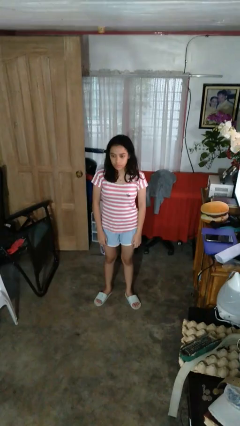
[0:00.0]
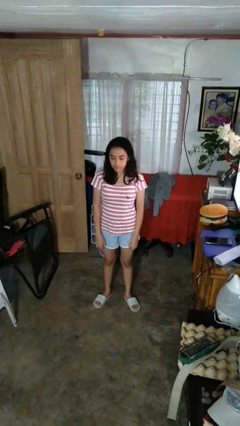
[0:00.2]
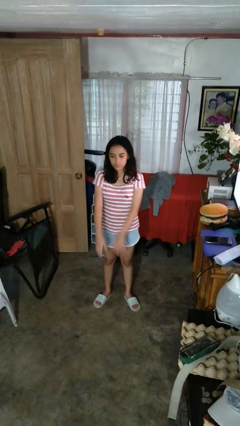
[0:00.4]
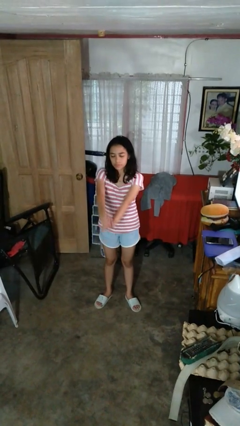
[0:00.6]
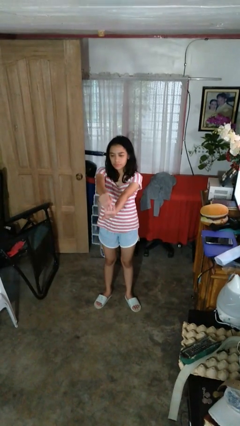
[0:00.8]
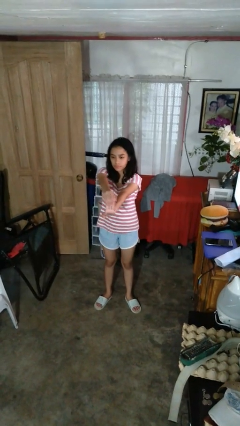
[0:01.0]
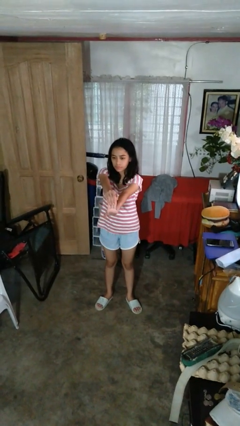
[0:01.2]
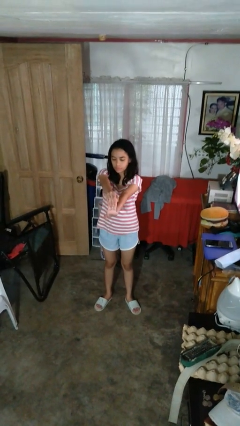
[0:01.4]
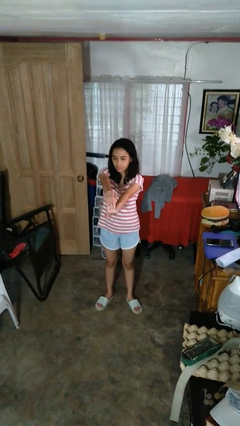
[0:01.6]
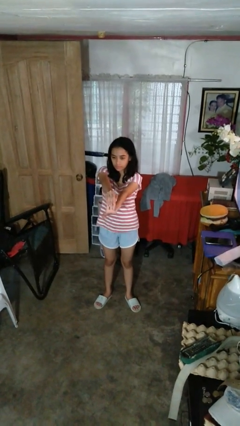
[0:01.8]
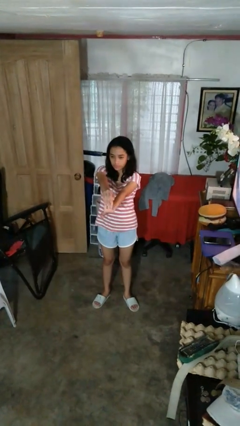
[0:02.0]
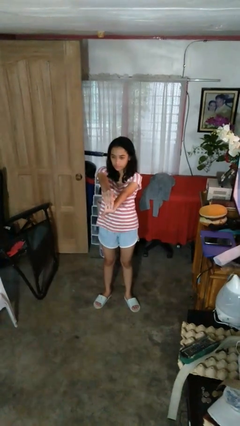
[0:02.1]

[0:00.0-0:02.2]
person cracks knuckles

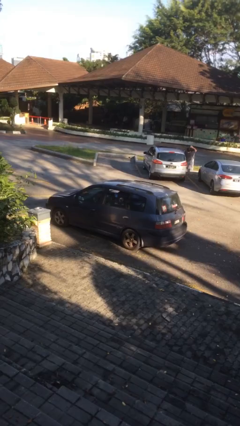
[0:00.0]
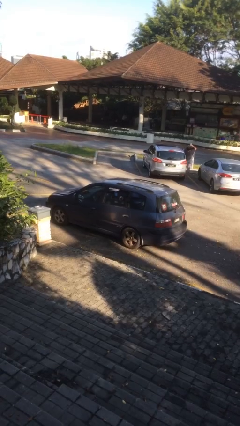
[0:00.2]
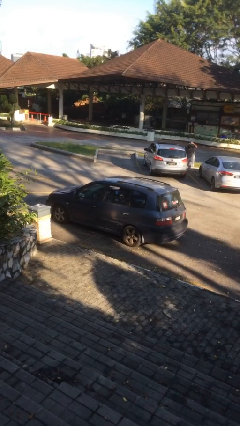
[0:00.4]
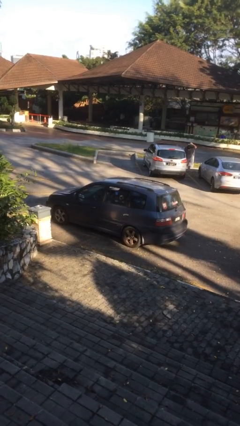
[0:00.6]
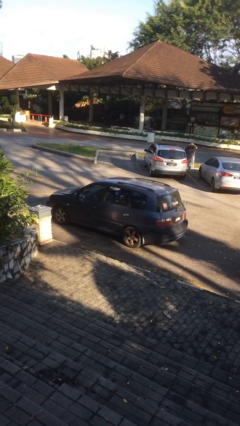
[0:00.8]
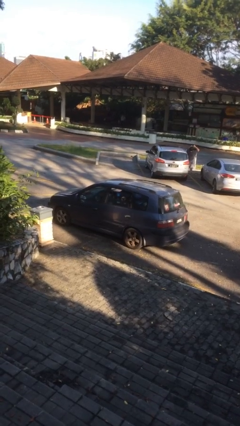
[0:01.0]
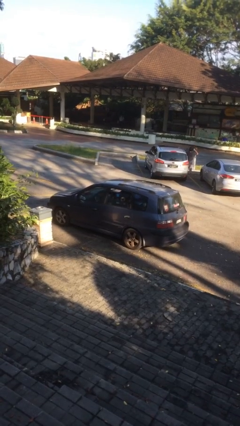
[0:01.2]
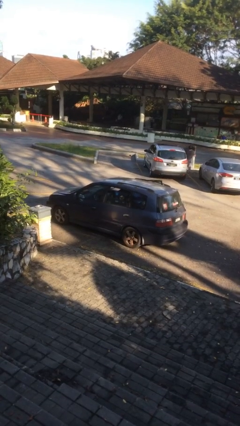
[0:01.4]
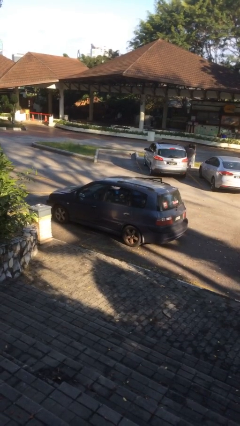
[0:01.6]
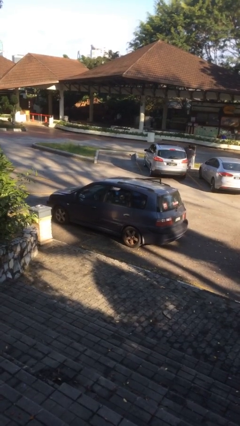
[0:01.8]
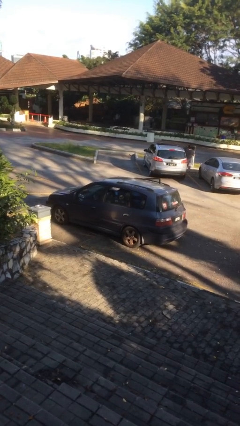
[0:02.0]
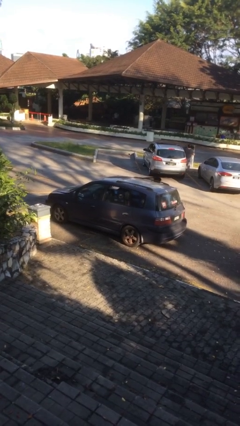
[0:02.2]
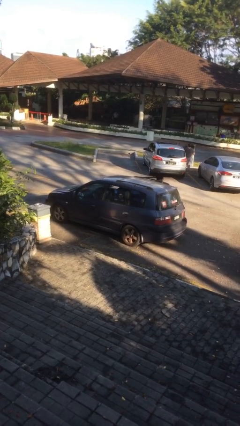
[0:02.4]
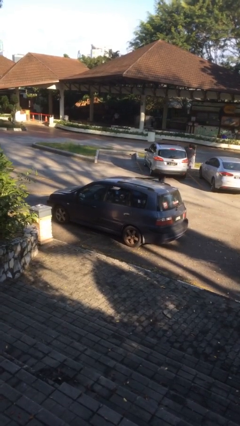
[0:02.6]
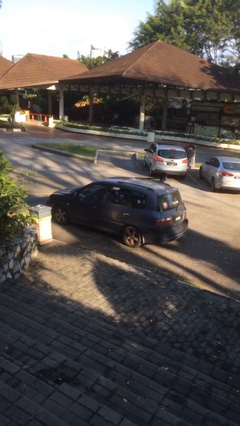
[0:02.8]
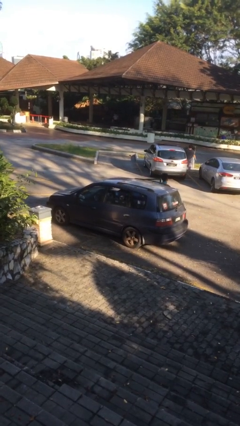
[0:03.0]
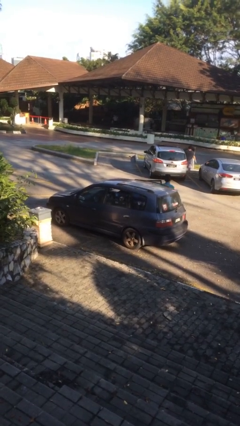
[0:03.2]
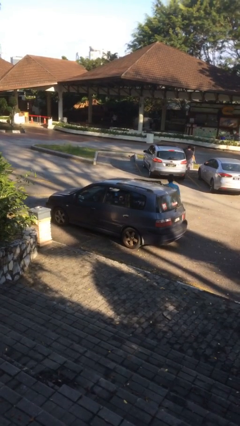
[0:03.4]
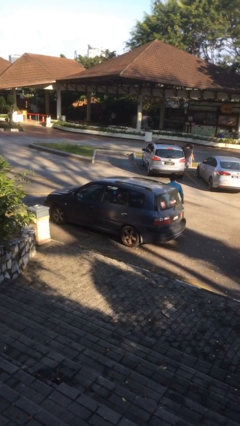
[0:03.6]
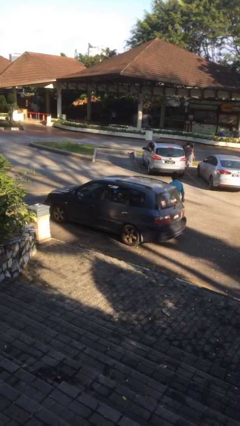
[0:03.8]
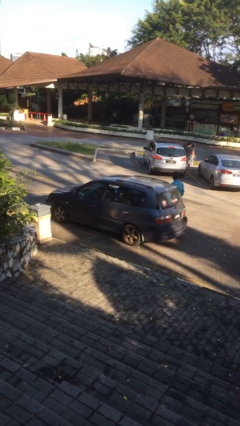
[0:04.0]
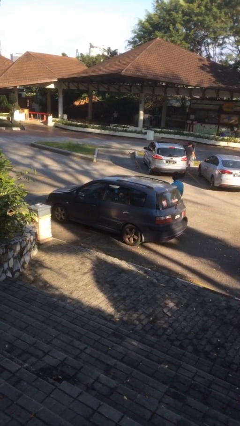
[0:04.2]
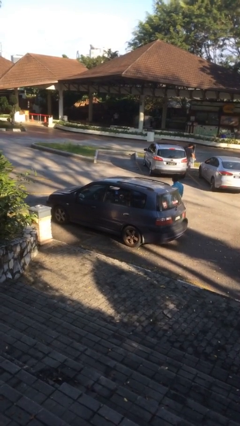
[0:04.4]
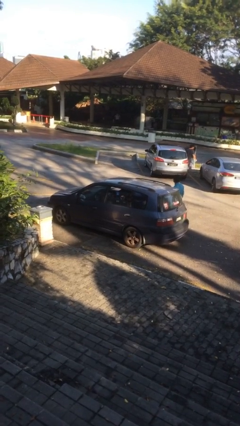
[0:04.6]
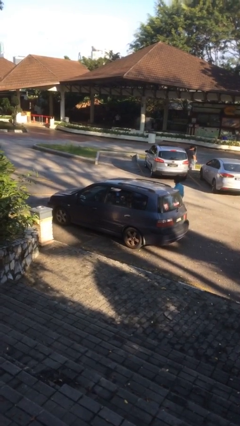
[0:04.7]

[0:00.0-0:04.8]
car drops off person

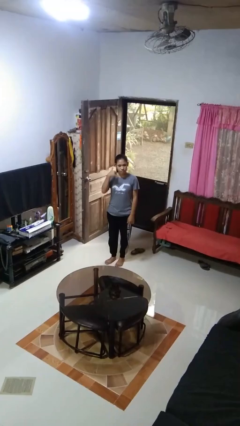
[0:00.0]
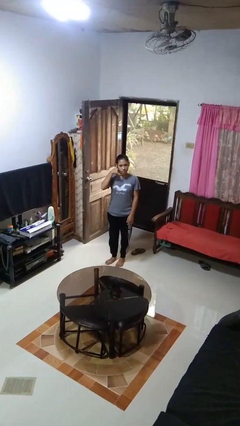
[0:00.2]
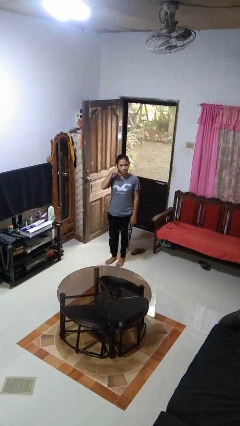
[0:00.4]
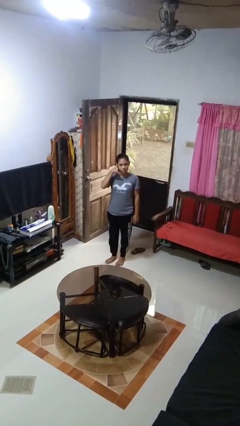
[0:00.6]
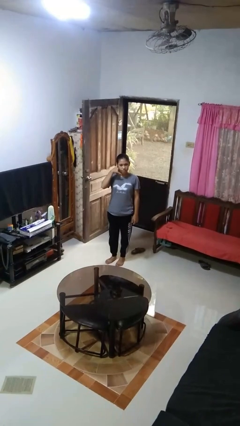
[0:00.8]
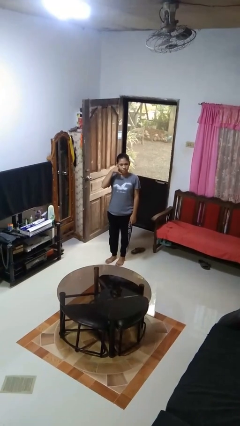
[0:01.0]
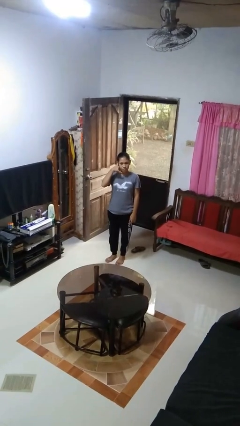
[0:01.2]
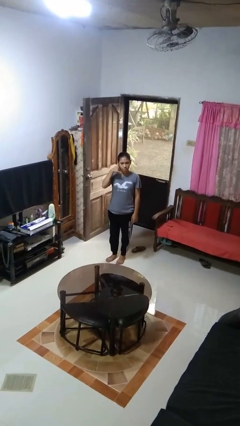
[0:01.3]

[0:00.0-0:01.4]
person gestures call me

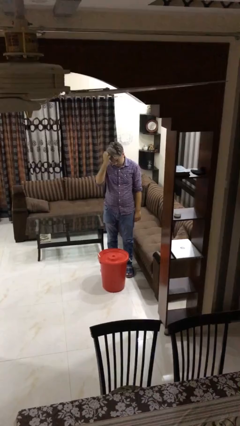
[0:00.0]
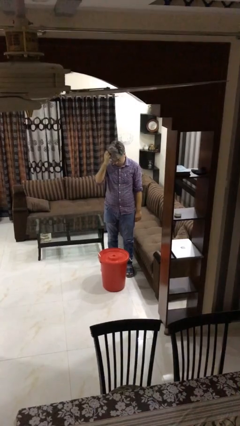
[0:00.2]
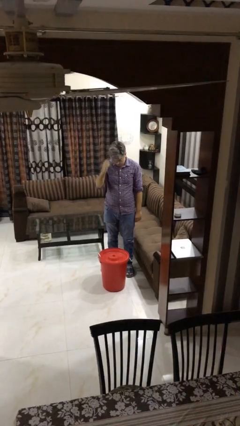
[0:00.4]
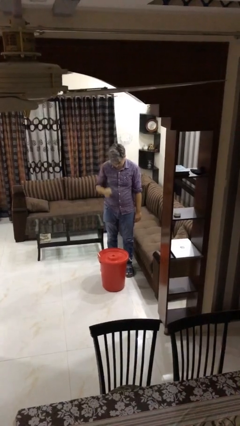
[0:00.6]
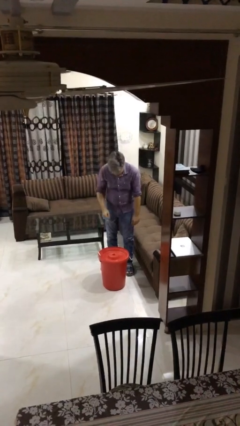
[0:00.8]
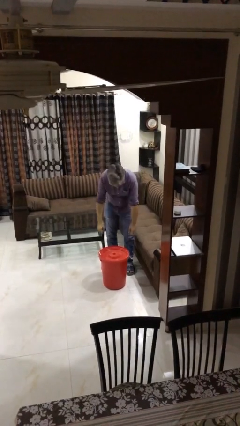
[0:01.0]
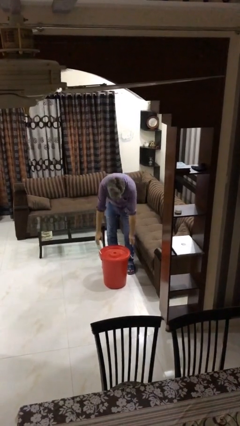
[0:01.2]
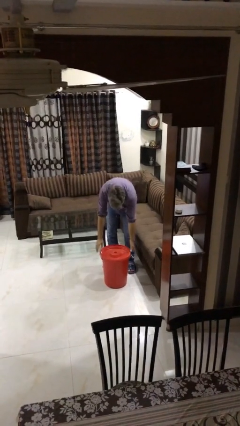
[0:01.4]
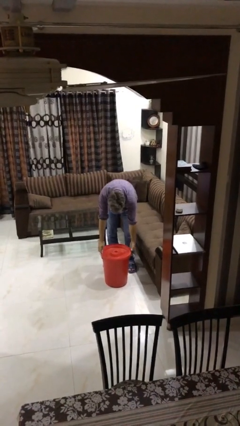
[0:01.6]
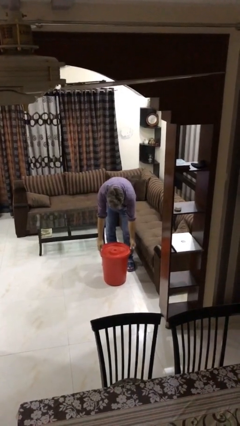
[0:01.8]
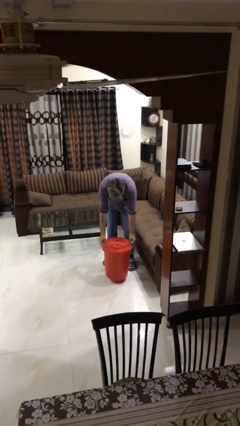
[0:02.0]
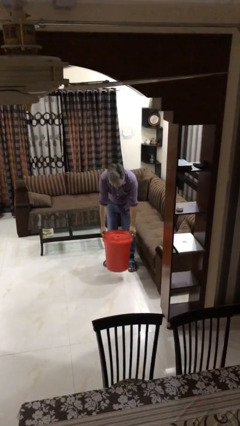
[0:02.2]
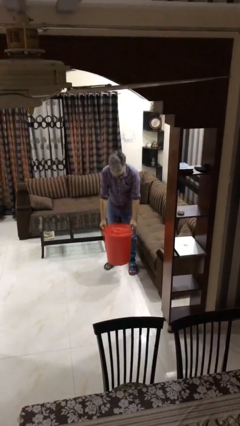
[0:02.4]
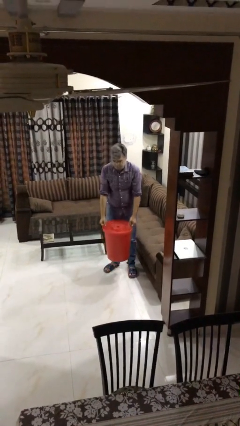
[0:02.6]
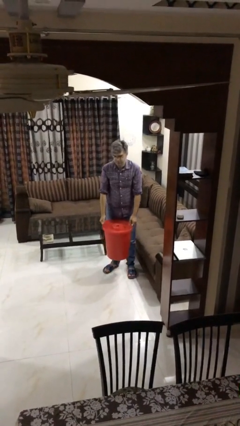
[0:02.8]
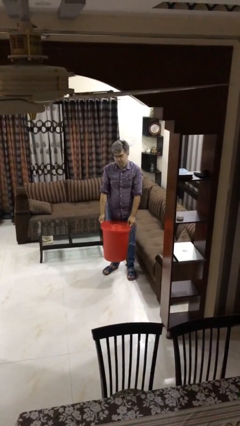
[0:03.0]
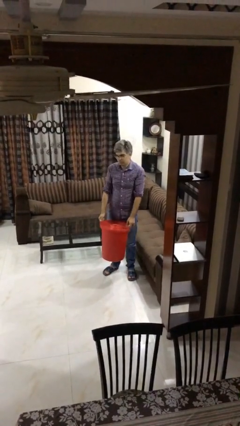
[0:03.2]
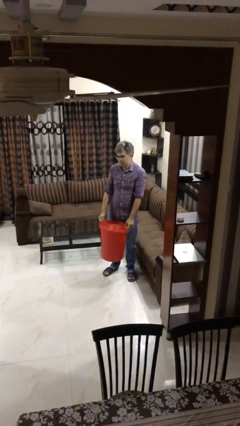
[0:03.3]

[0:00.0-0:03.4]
person picks up object from floor

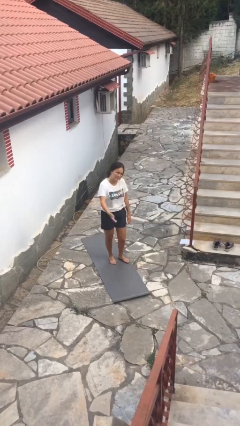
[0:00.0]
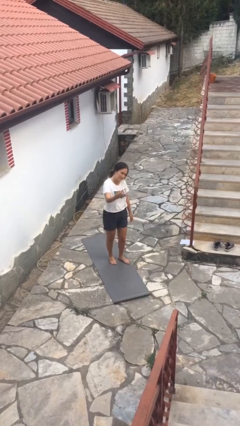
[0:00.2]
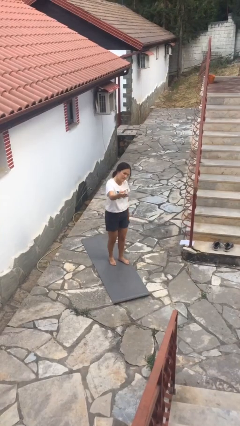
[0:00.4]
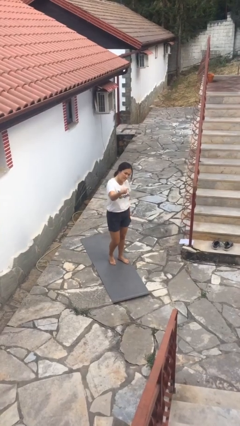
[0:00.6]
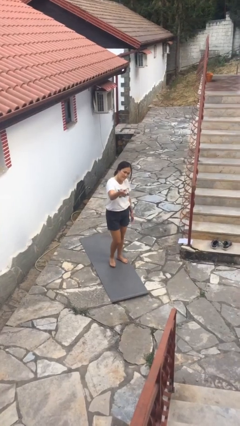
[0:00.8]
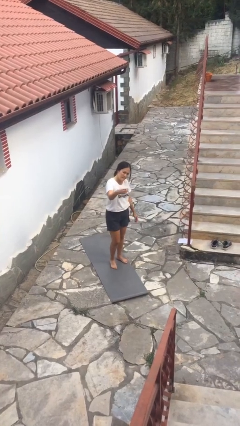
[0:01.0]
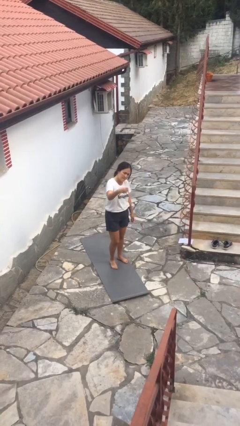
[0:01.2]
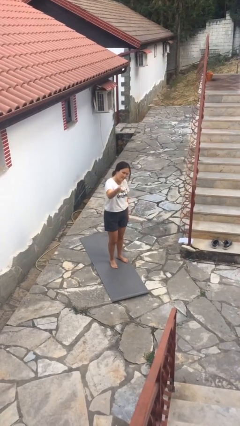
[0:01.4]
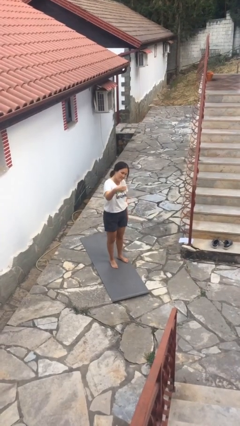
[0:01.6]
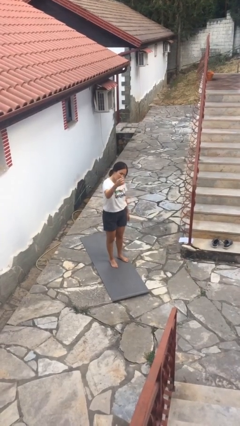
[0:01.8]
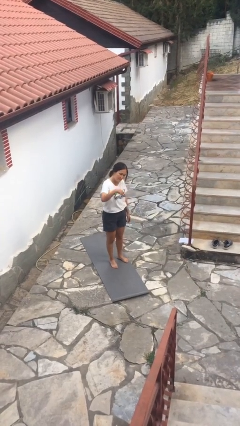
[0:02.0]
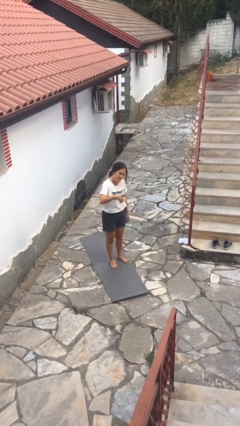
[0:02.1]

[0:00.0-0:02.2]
person gestures come here

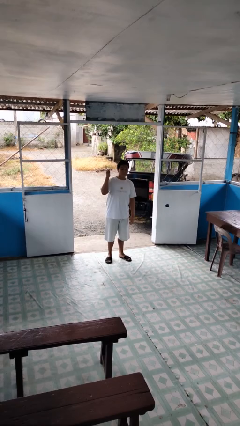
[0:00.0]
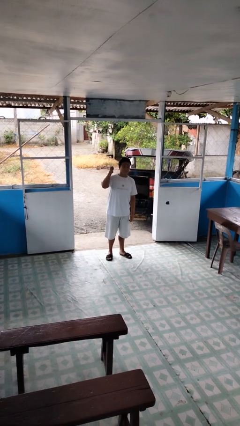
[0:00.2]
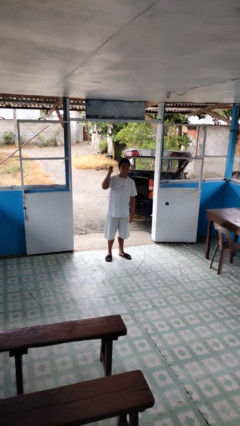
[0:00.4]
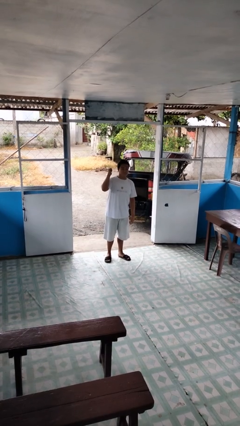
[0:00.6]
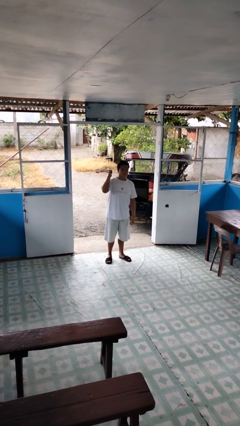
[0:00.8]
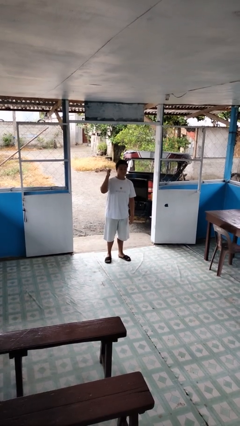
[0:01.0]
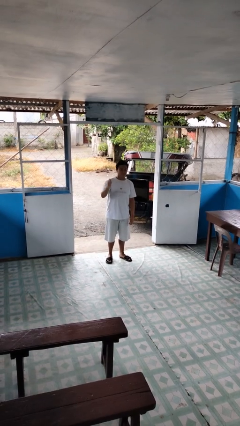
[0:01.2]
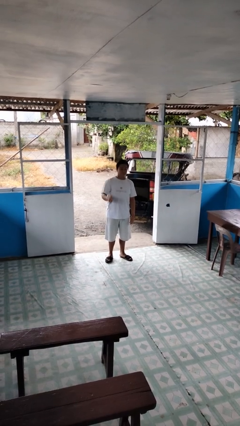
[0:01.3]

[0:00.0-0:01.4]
person gestures behind me

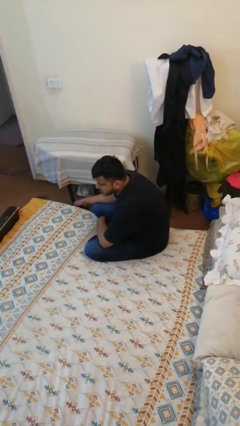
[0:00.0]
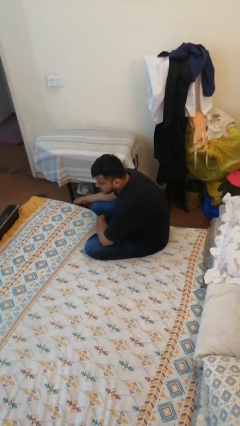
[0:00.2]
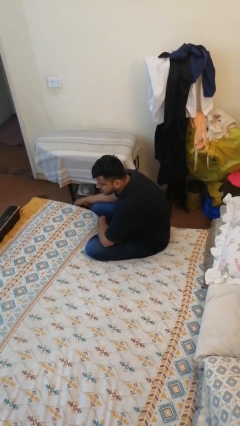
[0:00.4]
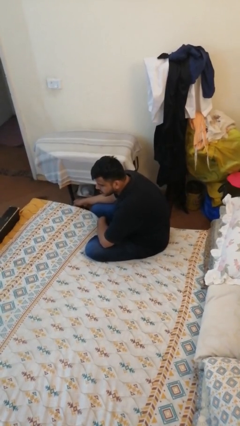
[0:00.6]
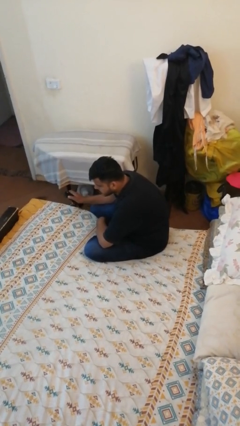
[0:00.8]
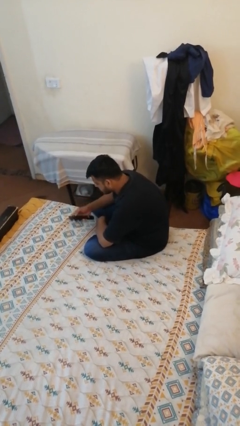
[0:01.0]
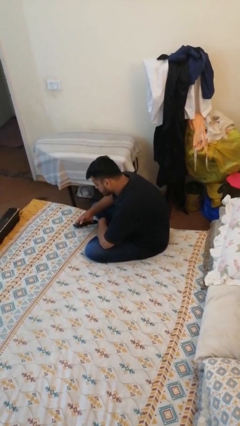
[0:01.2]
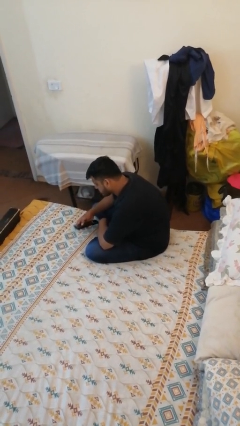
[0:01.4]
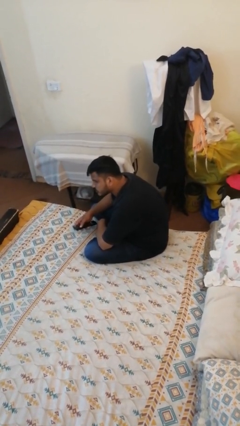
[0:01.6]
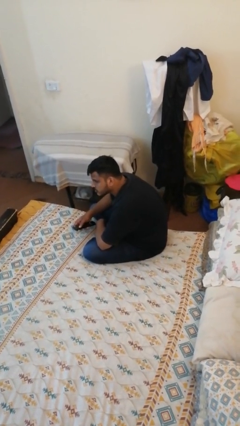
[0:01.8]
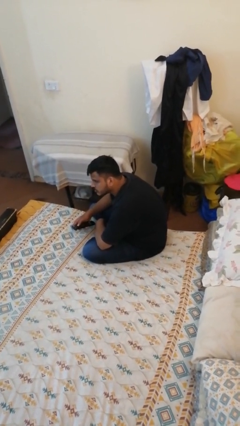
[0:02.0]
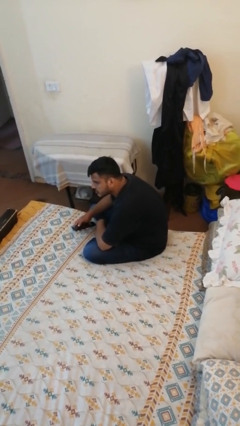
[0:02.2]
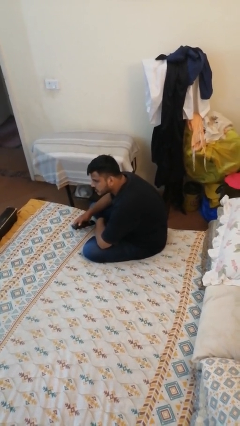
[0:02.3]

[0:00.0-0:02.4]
person uses television remote
